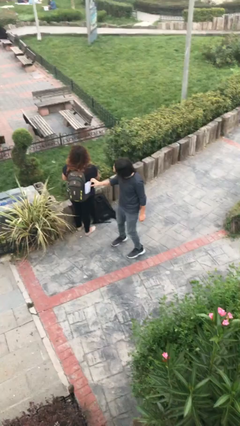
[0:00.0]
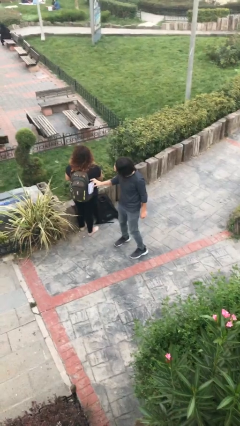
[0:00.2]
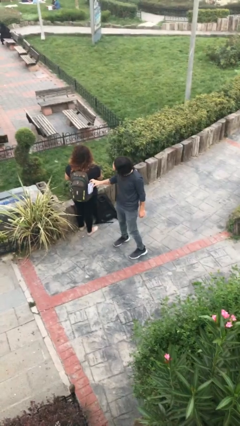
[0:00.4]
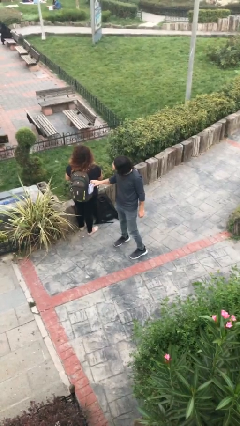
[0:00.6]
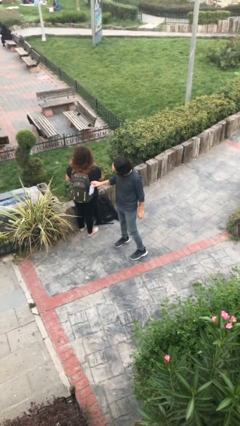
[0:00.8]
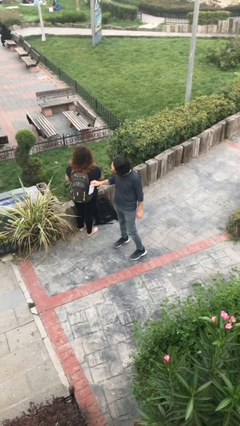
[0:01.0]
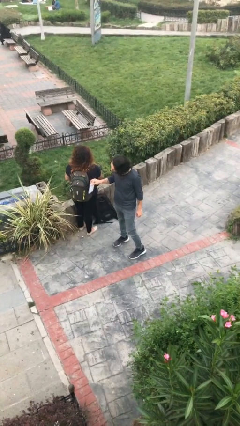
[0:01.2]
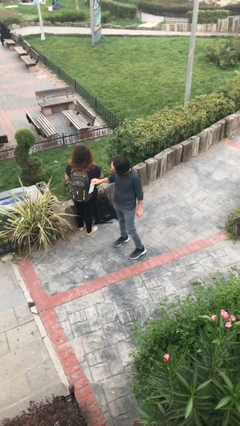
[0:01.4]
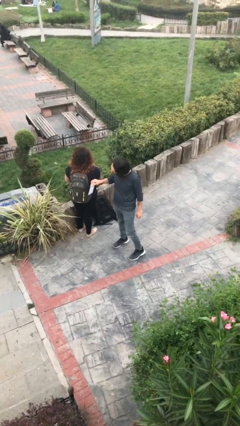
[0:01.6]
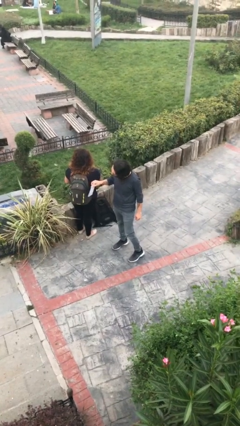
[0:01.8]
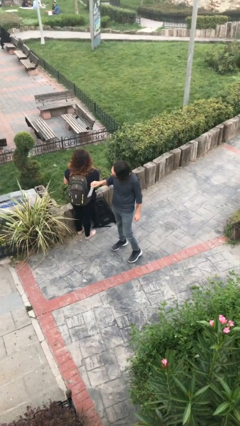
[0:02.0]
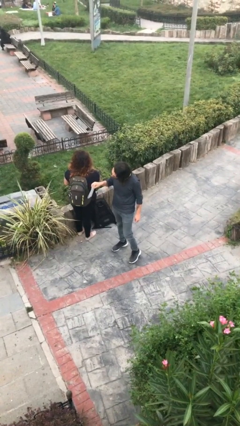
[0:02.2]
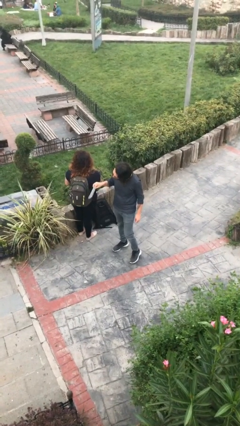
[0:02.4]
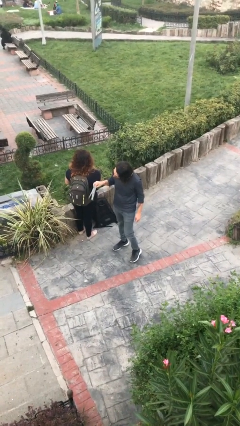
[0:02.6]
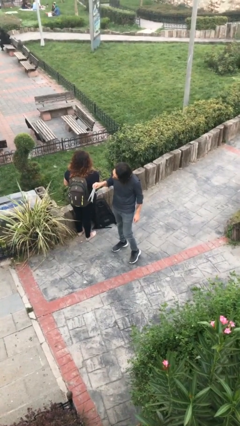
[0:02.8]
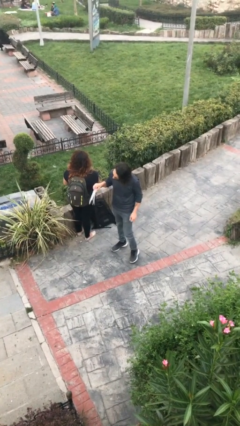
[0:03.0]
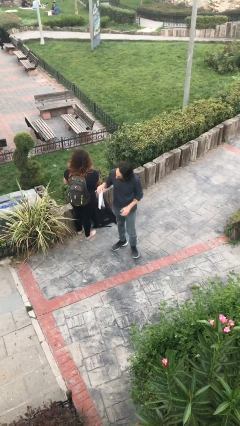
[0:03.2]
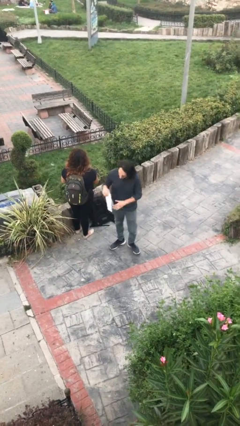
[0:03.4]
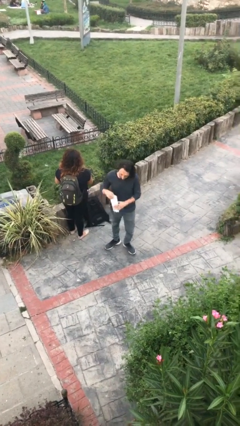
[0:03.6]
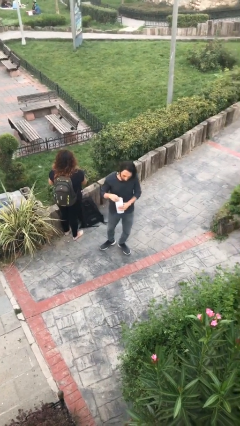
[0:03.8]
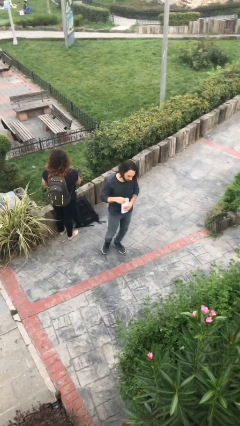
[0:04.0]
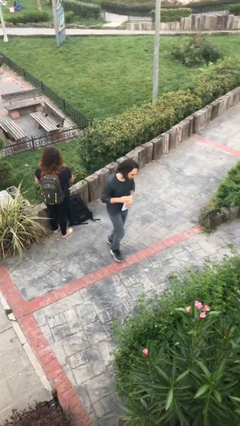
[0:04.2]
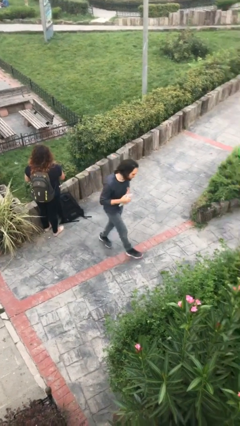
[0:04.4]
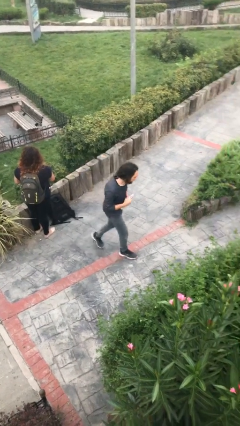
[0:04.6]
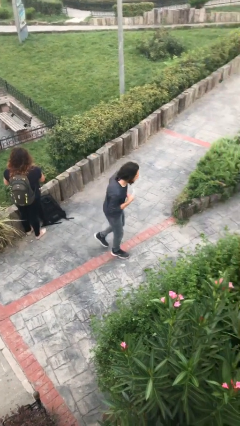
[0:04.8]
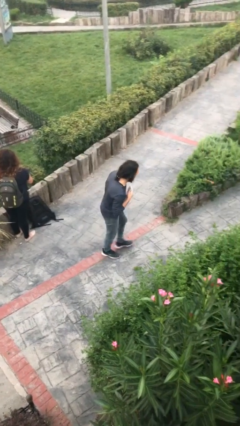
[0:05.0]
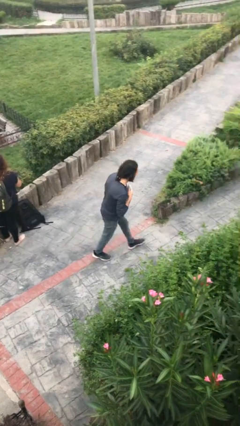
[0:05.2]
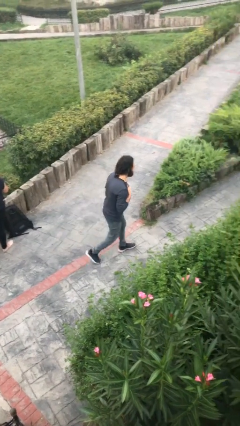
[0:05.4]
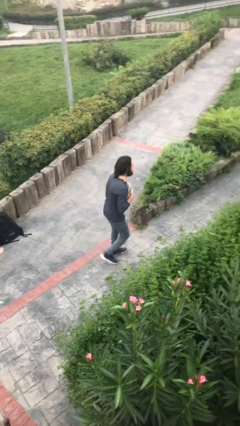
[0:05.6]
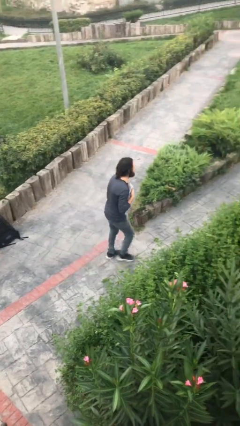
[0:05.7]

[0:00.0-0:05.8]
person steals object from person

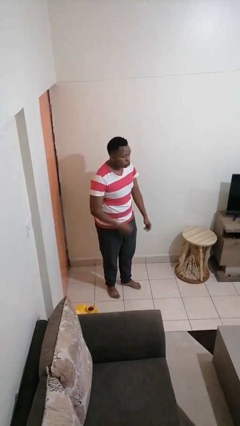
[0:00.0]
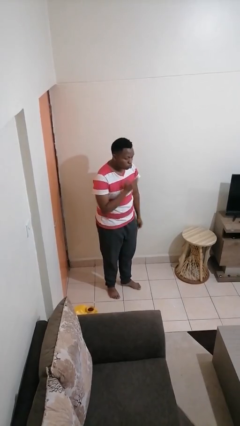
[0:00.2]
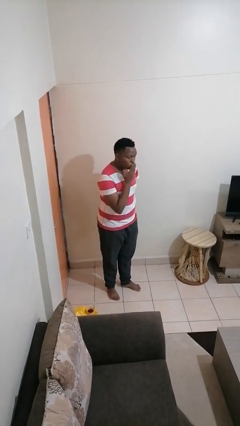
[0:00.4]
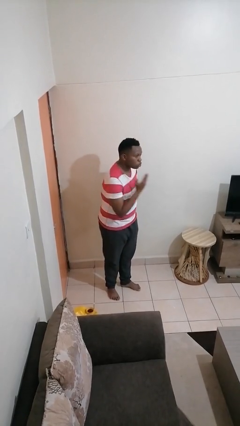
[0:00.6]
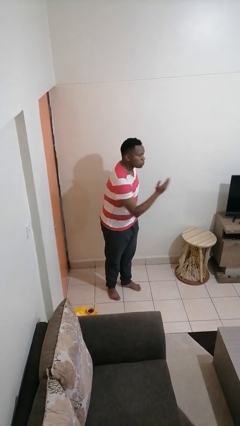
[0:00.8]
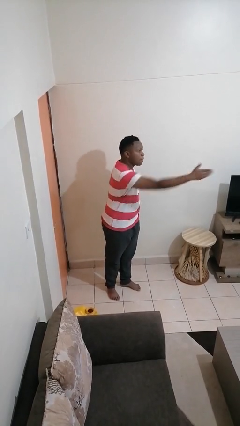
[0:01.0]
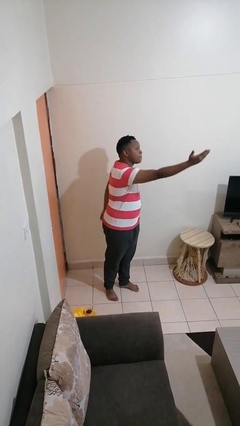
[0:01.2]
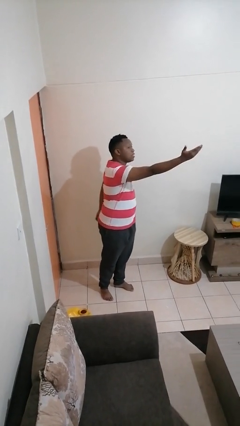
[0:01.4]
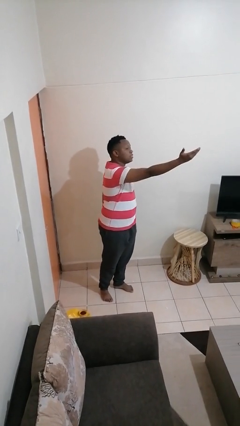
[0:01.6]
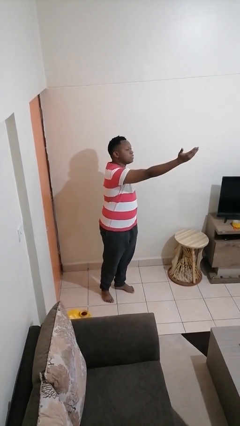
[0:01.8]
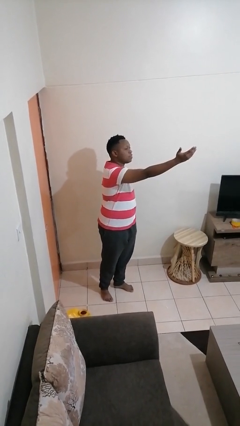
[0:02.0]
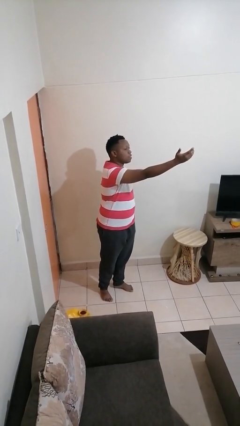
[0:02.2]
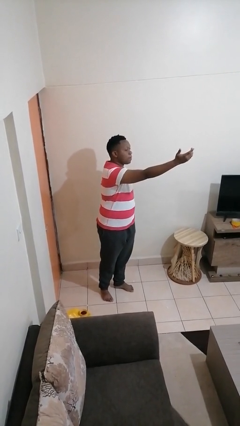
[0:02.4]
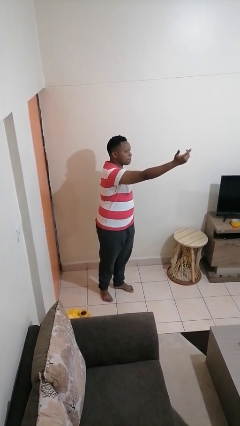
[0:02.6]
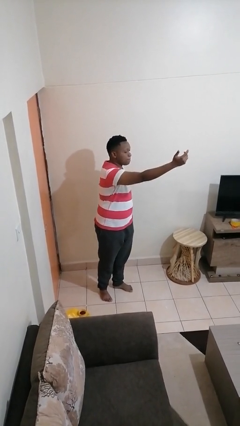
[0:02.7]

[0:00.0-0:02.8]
person gestures blow kiss

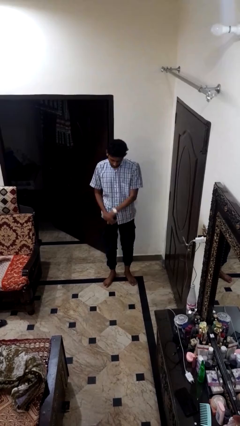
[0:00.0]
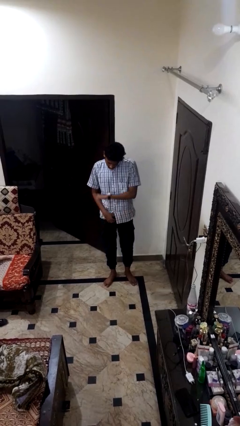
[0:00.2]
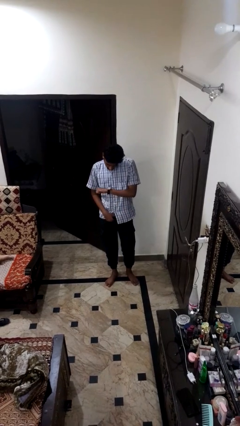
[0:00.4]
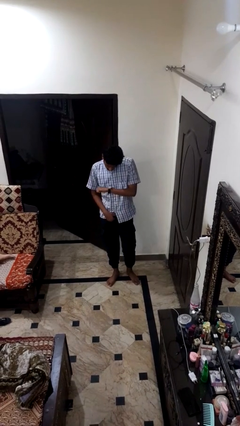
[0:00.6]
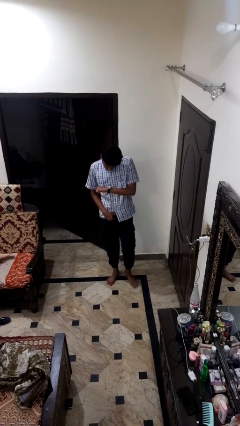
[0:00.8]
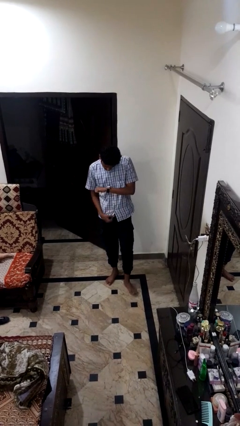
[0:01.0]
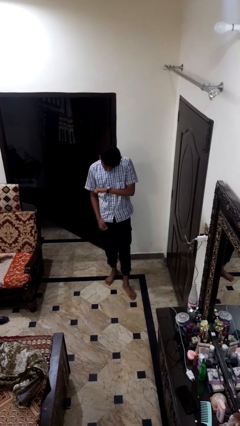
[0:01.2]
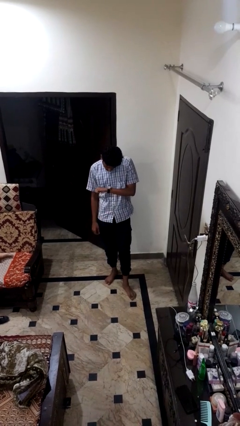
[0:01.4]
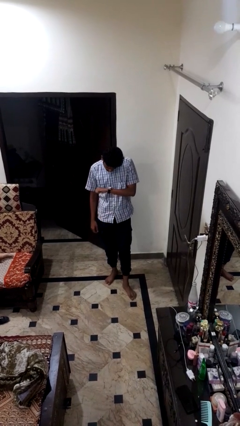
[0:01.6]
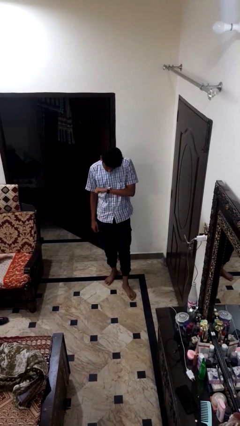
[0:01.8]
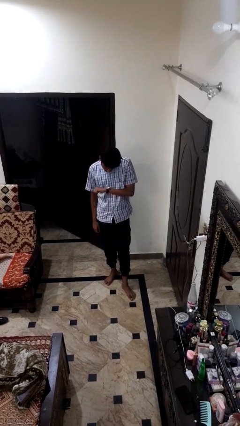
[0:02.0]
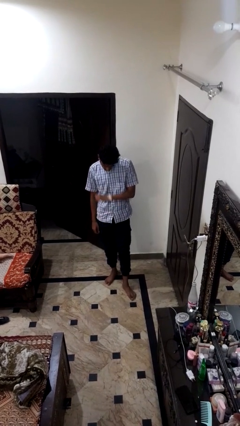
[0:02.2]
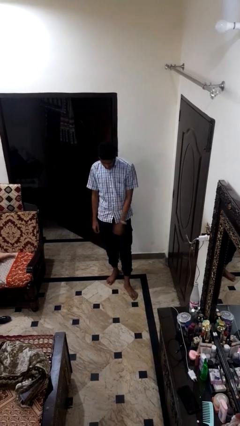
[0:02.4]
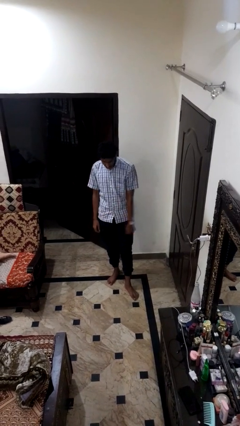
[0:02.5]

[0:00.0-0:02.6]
person looks at wristwatch

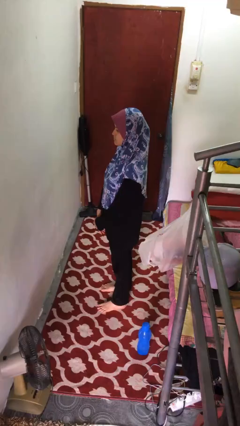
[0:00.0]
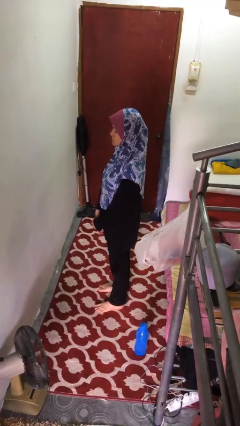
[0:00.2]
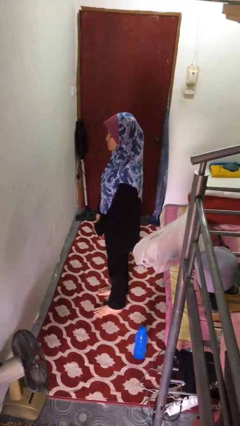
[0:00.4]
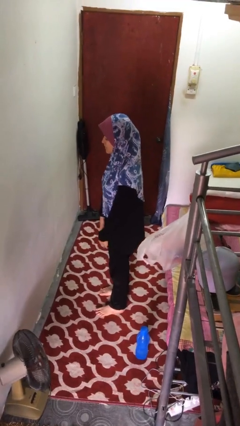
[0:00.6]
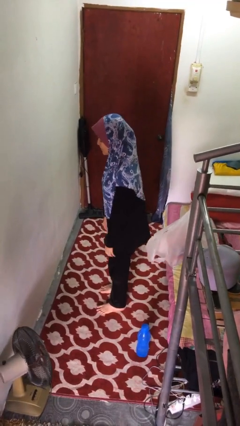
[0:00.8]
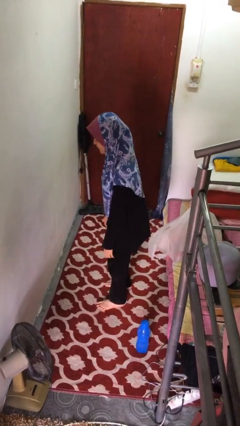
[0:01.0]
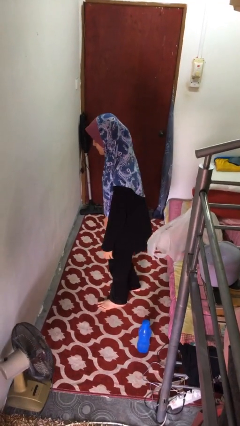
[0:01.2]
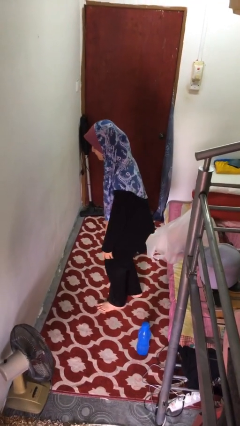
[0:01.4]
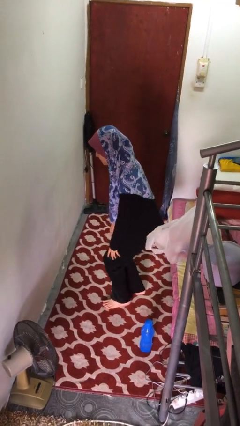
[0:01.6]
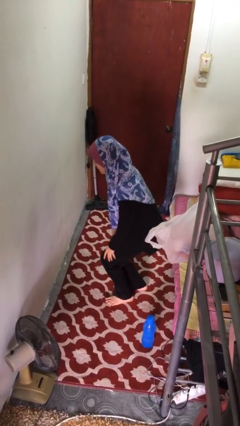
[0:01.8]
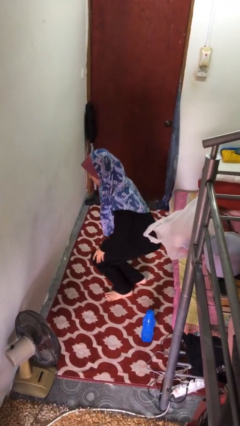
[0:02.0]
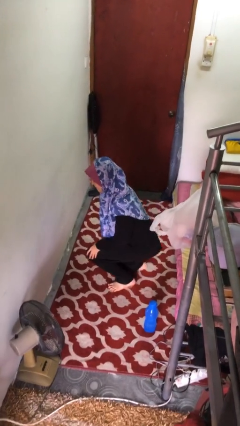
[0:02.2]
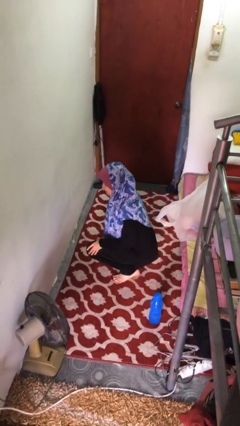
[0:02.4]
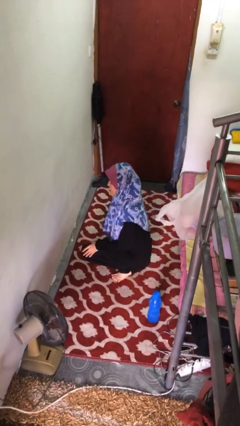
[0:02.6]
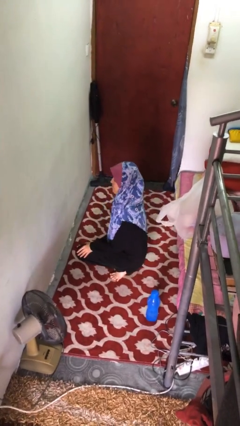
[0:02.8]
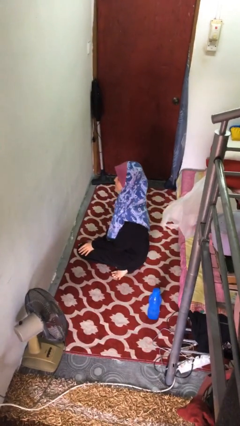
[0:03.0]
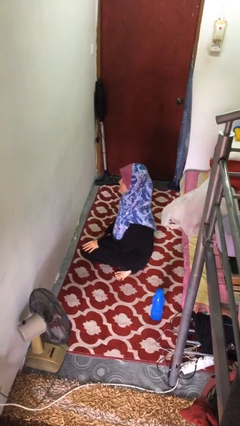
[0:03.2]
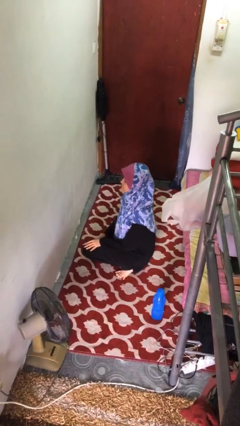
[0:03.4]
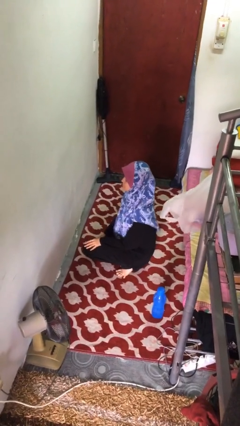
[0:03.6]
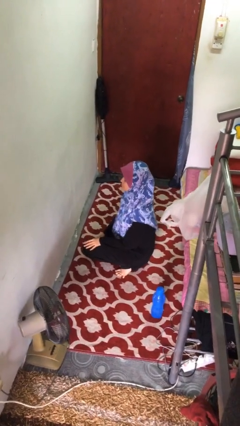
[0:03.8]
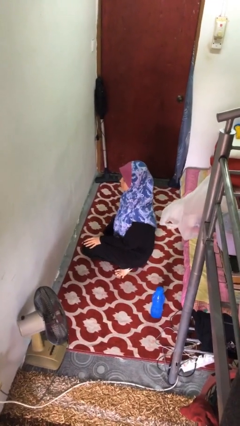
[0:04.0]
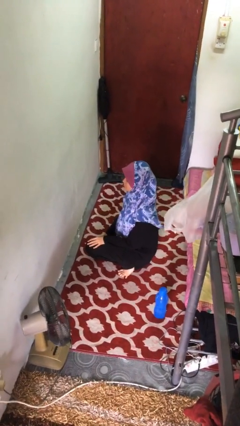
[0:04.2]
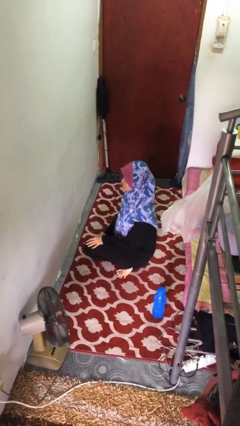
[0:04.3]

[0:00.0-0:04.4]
person kneels

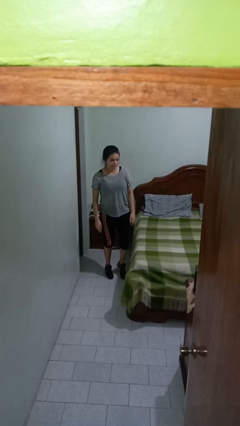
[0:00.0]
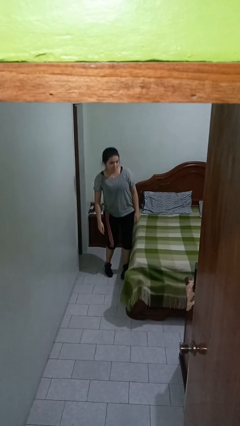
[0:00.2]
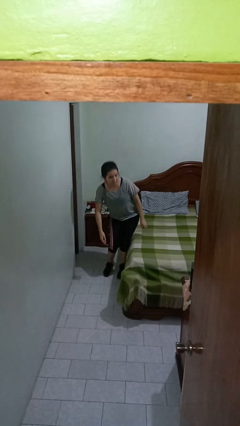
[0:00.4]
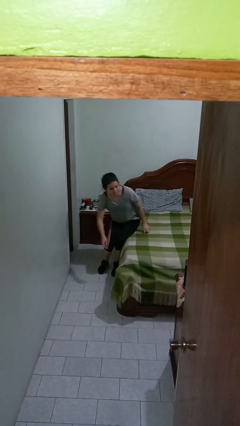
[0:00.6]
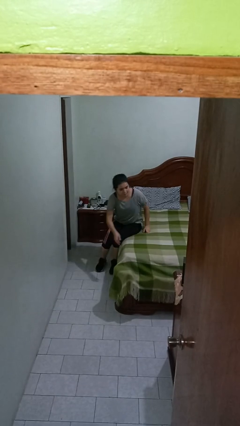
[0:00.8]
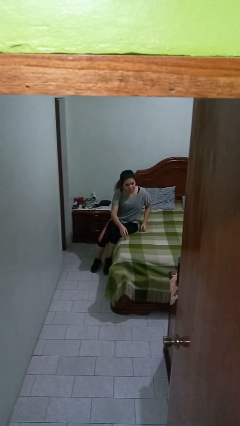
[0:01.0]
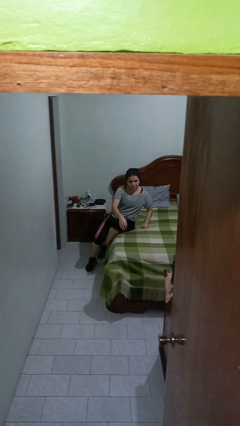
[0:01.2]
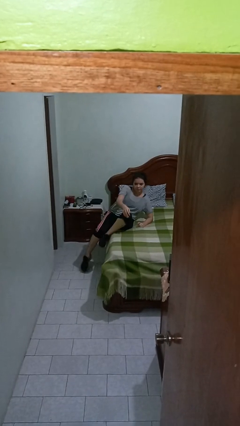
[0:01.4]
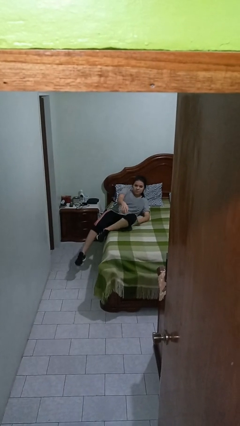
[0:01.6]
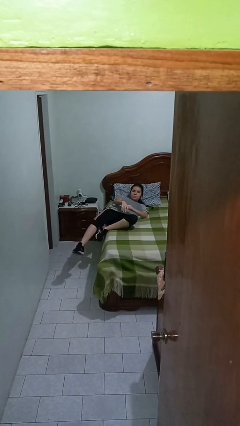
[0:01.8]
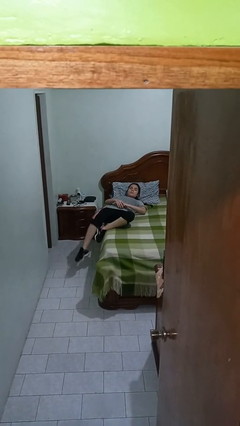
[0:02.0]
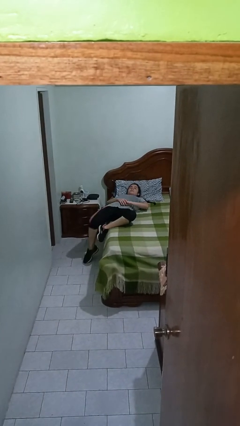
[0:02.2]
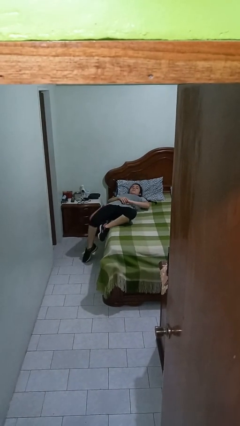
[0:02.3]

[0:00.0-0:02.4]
person lies down on bed

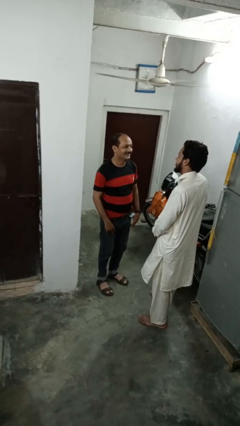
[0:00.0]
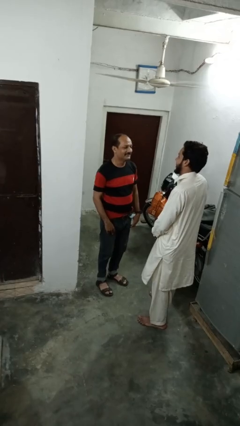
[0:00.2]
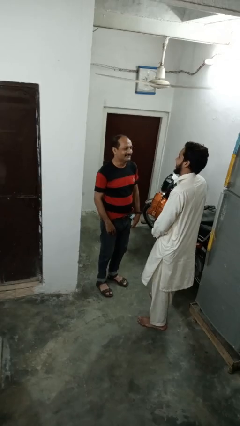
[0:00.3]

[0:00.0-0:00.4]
person laughs with person
